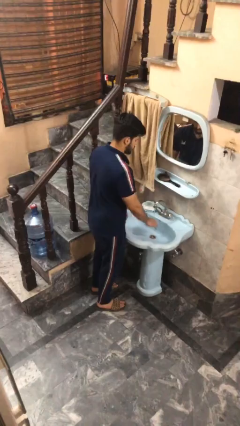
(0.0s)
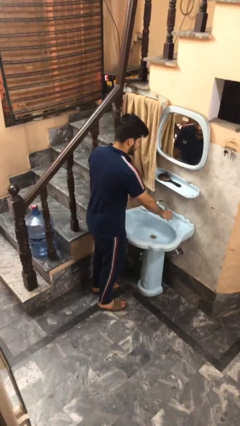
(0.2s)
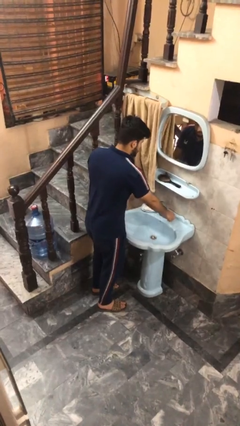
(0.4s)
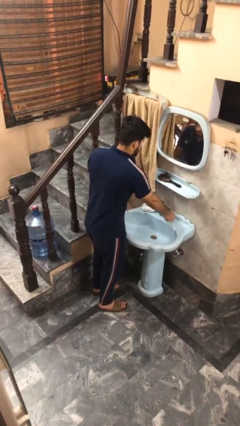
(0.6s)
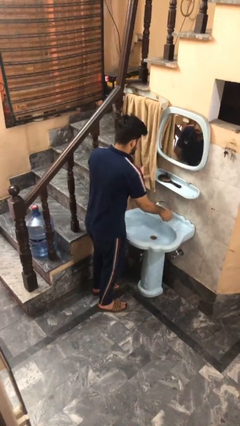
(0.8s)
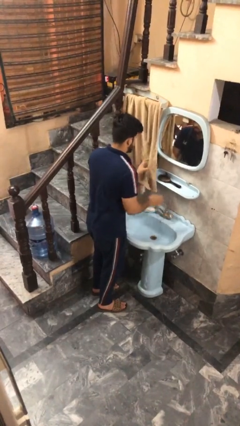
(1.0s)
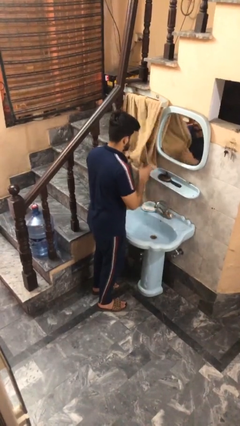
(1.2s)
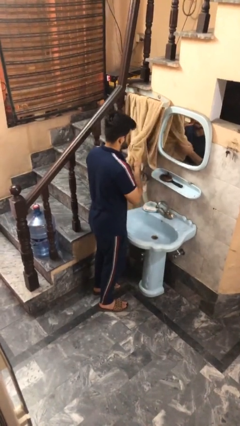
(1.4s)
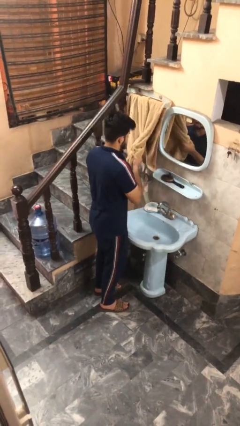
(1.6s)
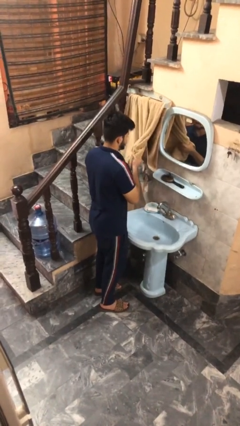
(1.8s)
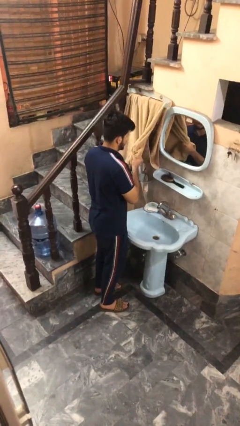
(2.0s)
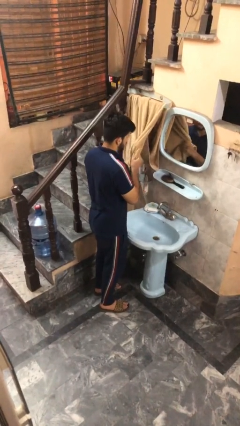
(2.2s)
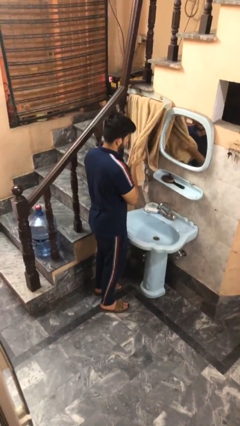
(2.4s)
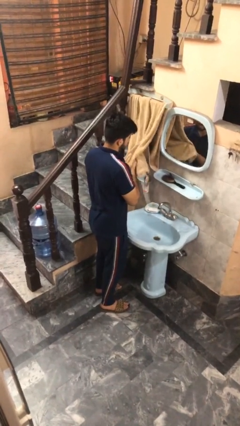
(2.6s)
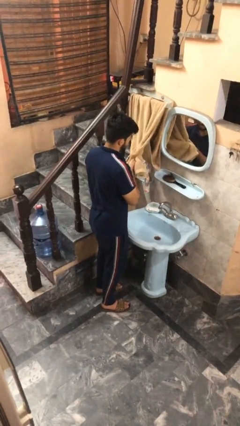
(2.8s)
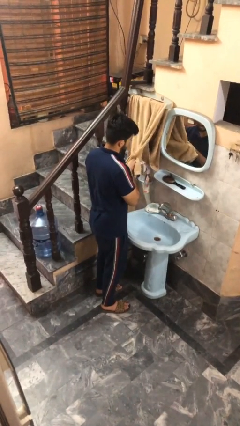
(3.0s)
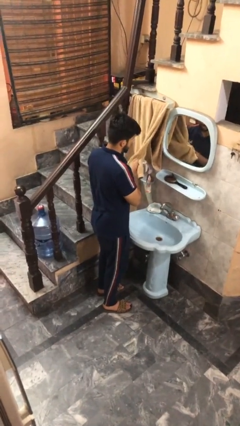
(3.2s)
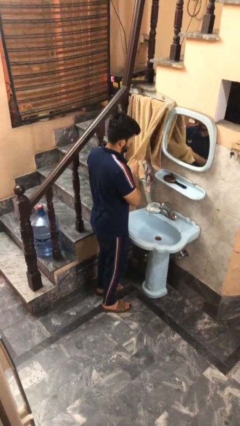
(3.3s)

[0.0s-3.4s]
person dries hands with towel

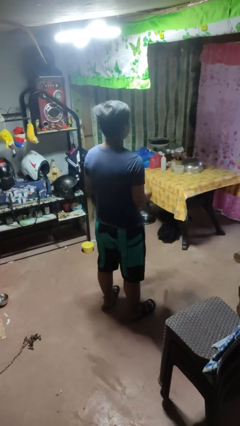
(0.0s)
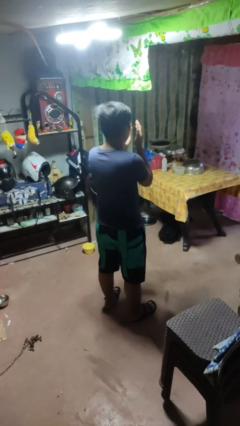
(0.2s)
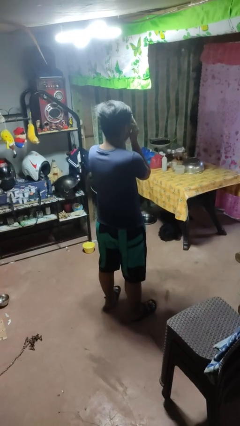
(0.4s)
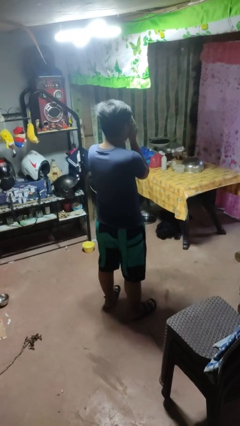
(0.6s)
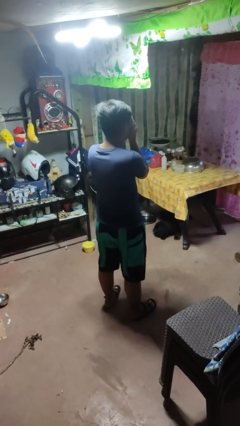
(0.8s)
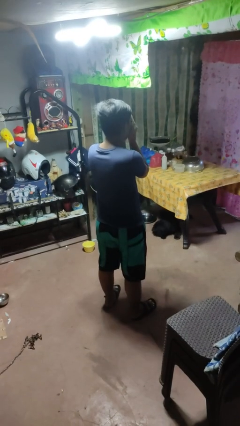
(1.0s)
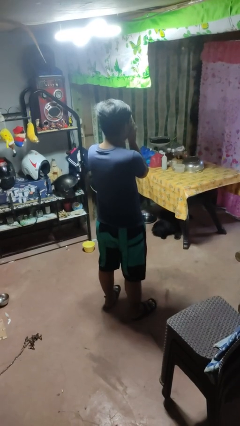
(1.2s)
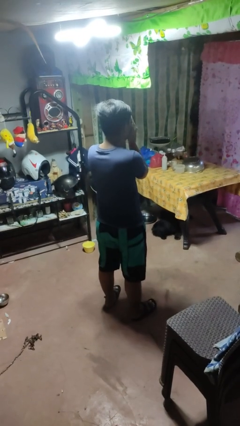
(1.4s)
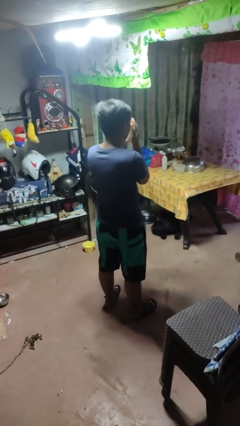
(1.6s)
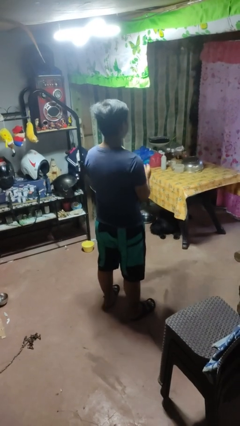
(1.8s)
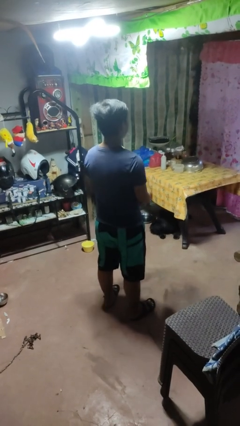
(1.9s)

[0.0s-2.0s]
person covers face with hands

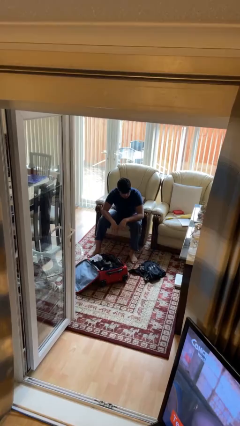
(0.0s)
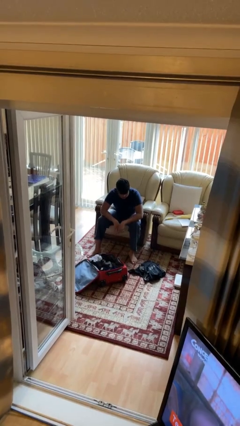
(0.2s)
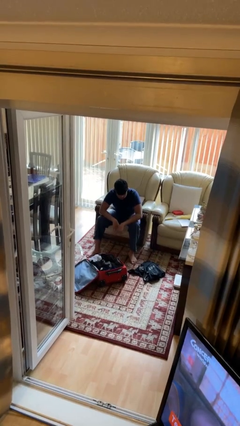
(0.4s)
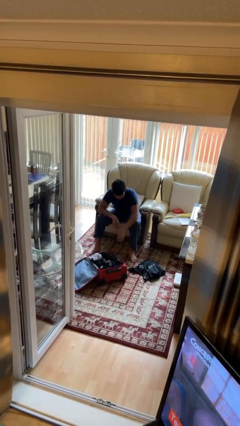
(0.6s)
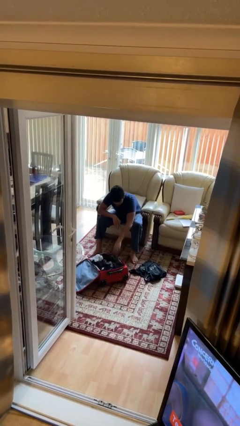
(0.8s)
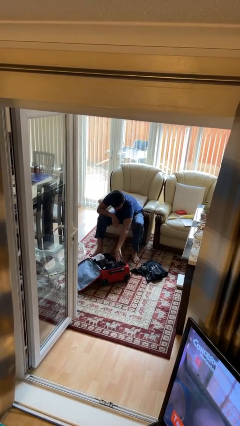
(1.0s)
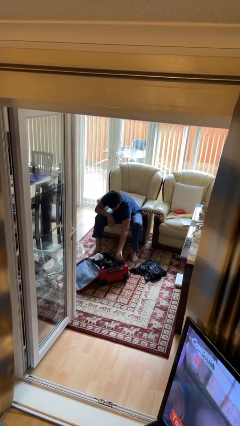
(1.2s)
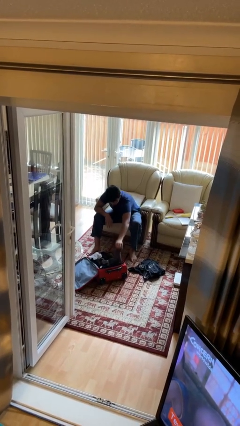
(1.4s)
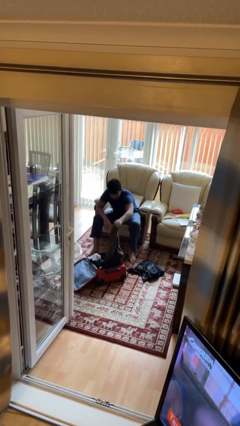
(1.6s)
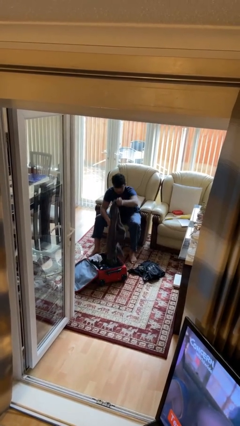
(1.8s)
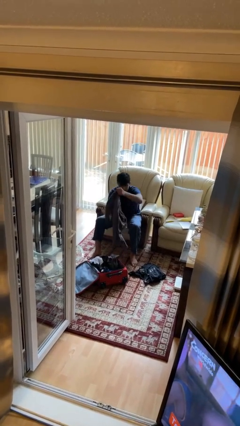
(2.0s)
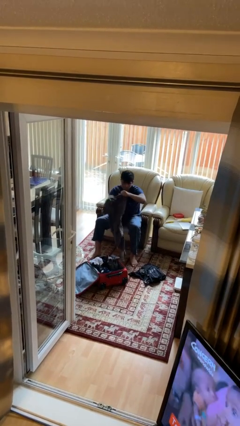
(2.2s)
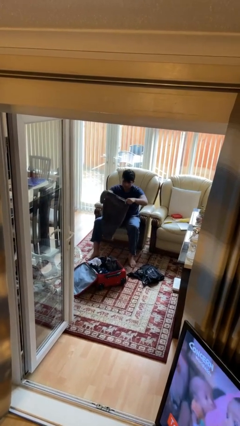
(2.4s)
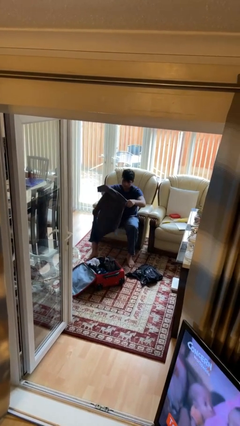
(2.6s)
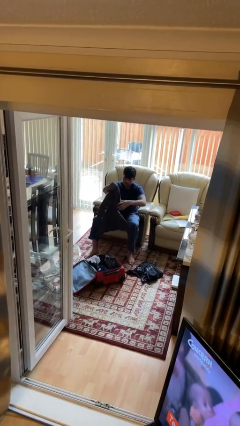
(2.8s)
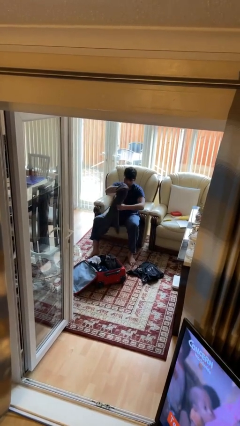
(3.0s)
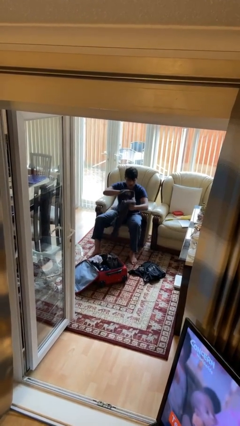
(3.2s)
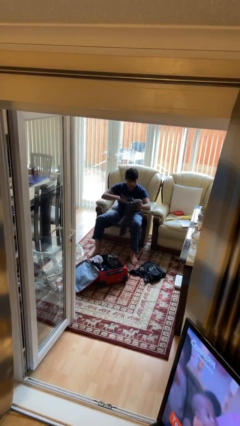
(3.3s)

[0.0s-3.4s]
person unloads clothes from suitcase

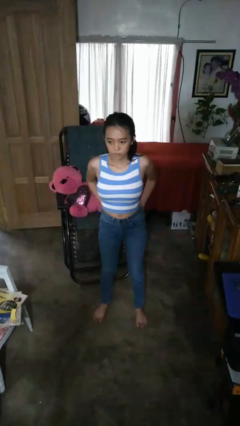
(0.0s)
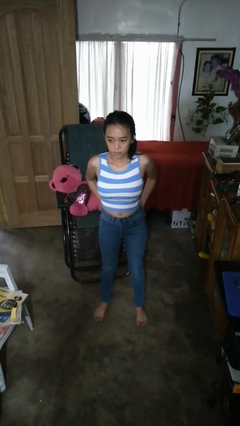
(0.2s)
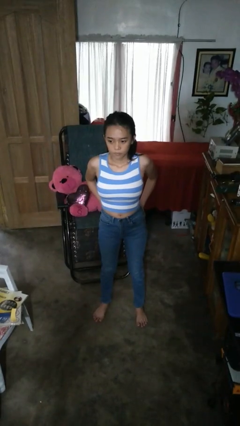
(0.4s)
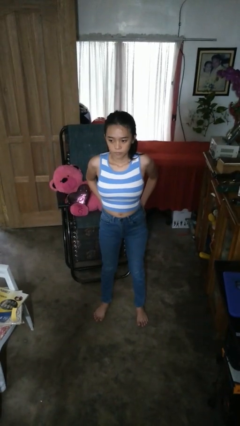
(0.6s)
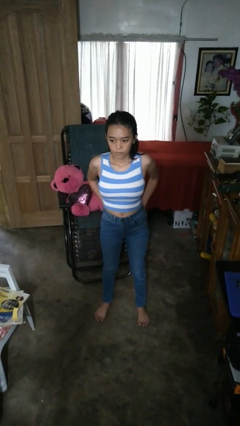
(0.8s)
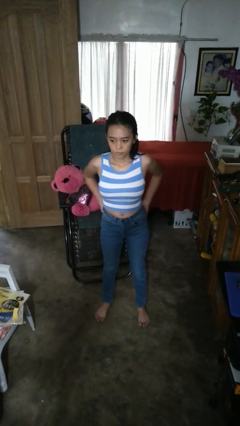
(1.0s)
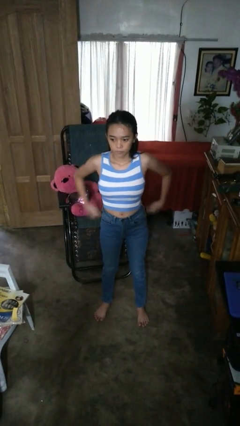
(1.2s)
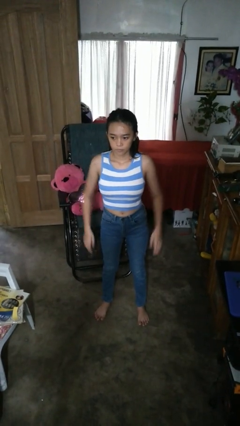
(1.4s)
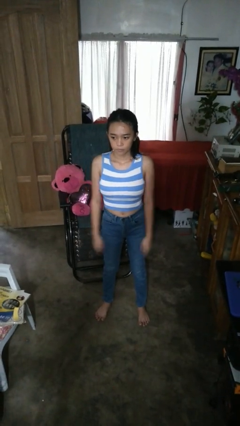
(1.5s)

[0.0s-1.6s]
person puts hands in back pockets

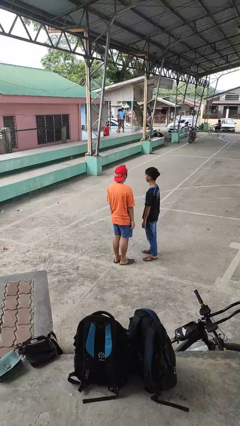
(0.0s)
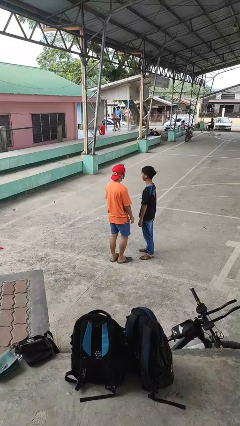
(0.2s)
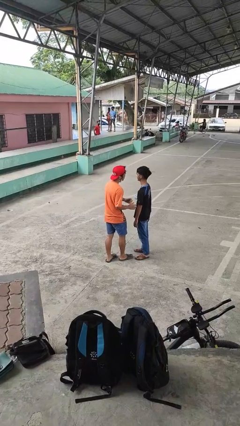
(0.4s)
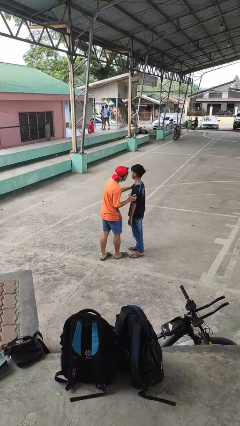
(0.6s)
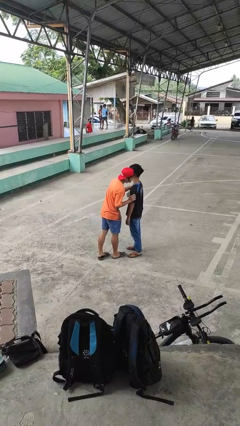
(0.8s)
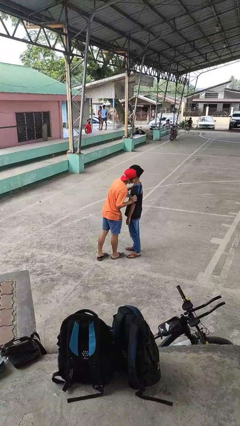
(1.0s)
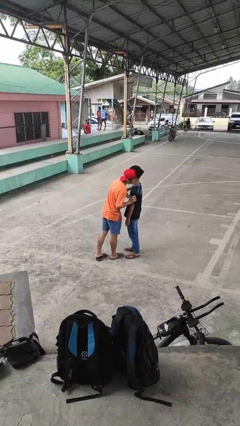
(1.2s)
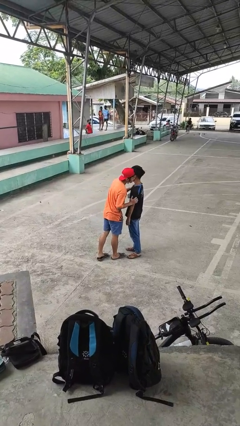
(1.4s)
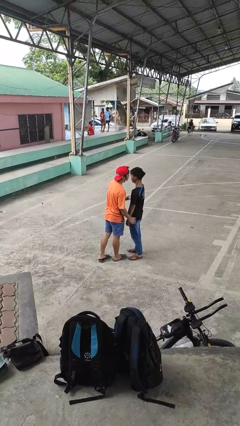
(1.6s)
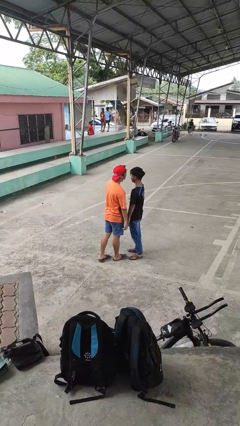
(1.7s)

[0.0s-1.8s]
person kisses cheek of person

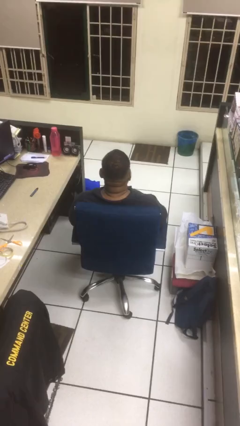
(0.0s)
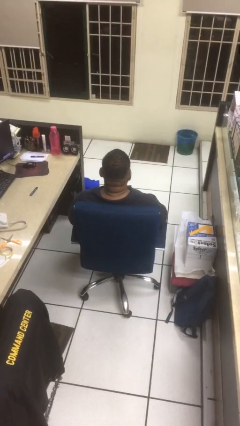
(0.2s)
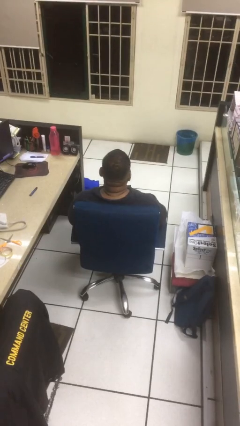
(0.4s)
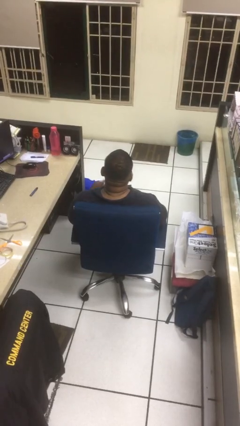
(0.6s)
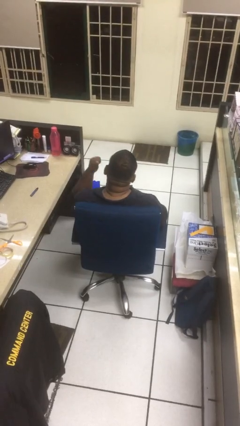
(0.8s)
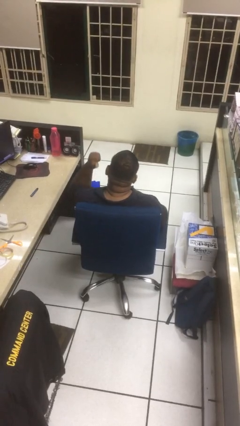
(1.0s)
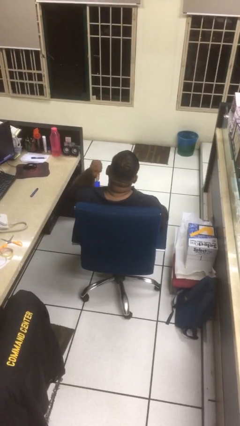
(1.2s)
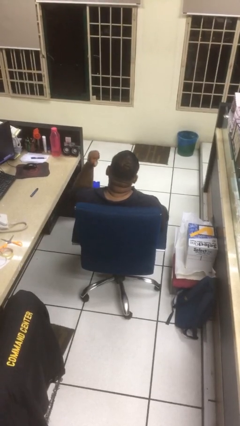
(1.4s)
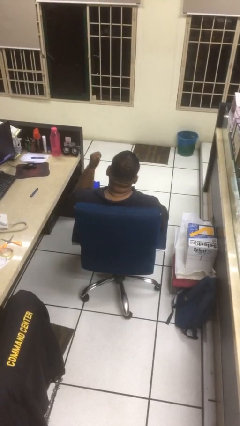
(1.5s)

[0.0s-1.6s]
person gestures behind me

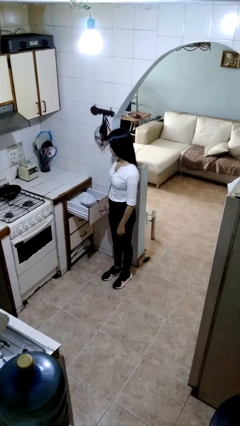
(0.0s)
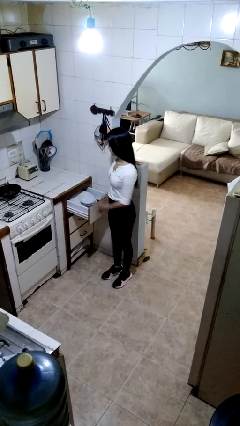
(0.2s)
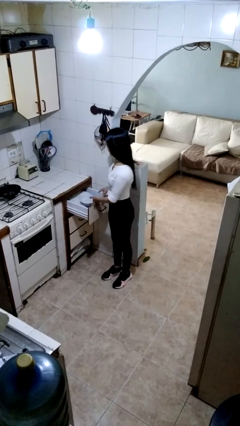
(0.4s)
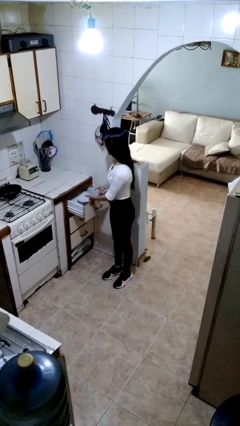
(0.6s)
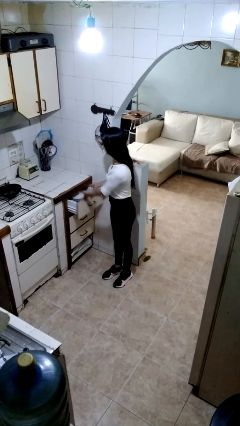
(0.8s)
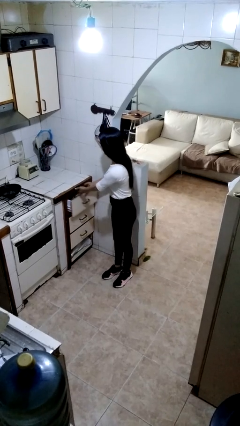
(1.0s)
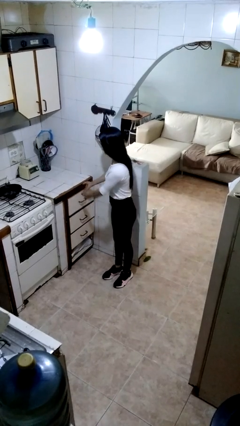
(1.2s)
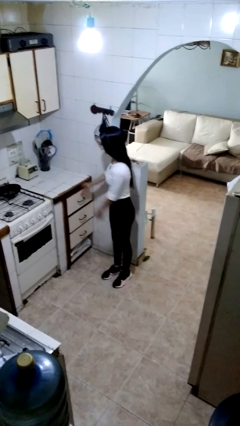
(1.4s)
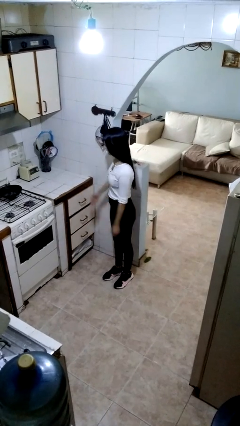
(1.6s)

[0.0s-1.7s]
person closes kitchen drawer

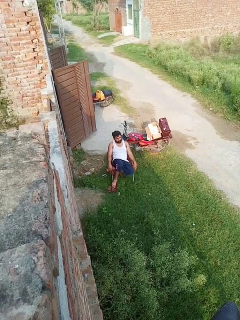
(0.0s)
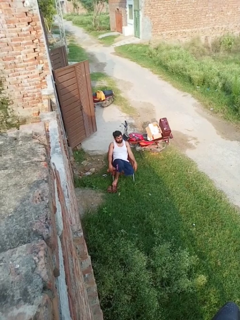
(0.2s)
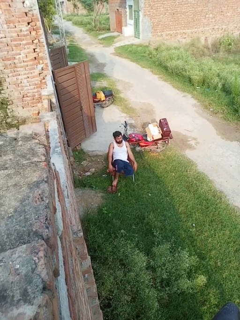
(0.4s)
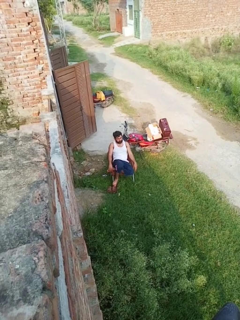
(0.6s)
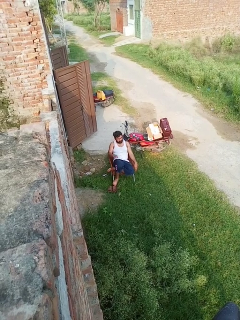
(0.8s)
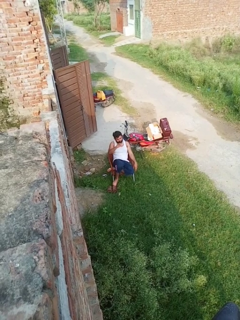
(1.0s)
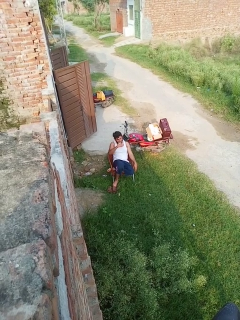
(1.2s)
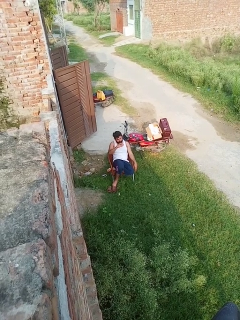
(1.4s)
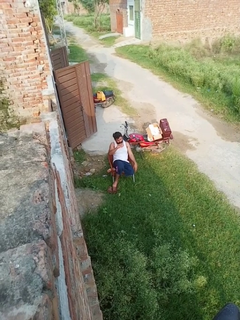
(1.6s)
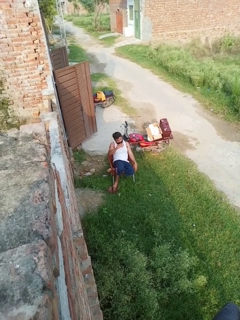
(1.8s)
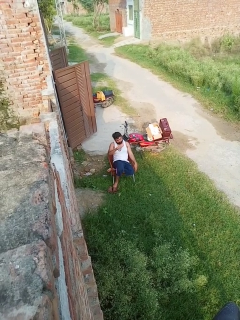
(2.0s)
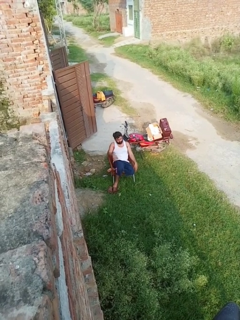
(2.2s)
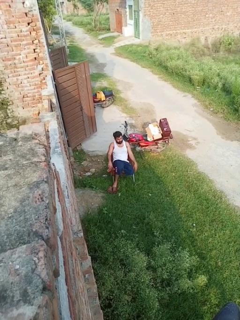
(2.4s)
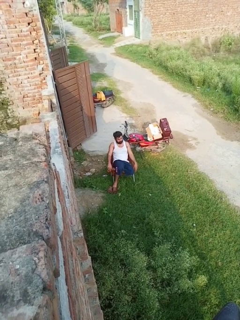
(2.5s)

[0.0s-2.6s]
person gestures come here
